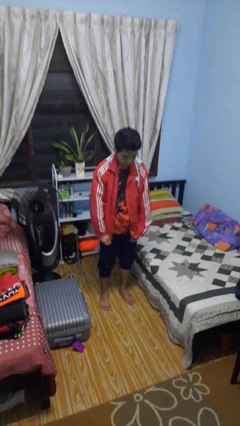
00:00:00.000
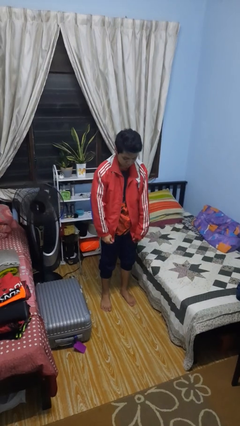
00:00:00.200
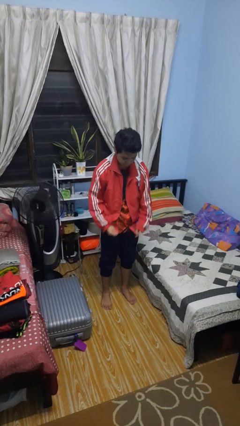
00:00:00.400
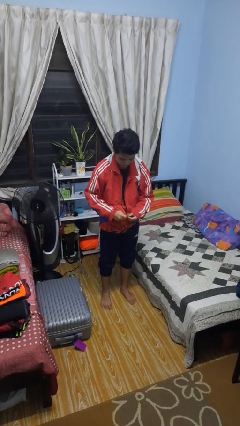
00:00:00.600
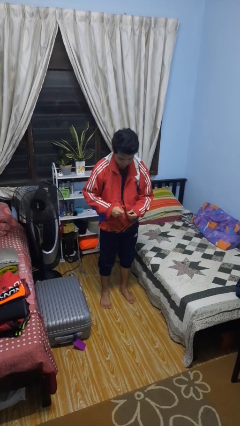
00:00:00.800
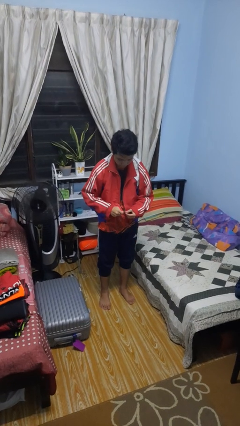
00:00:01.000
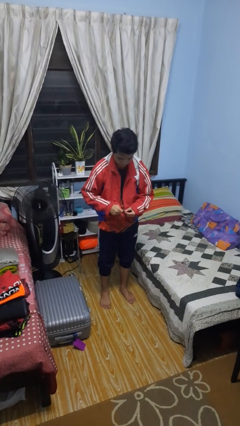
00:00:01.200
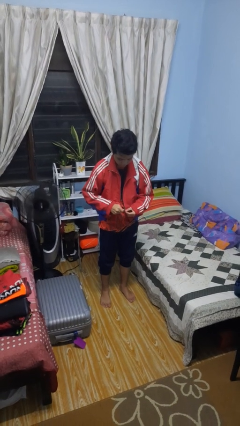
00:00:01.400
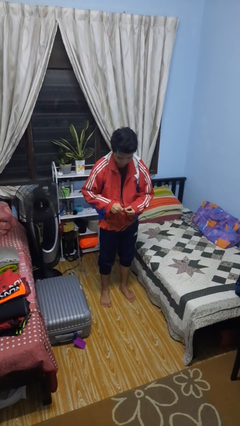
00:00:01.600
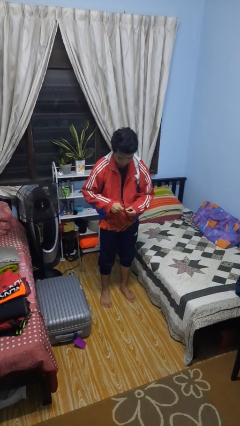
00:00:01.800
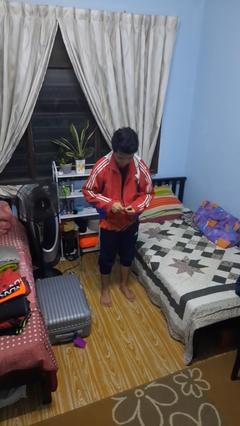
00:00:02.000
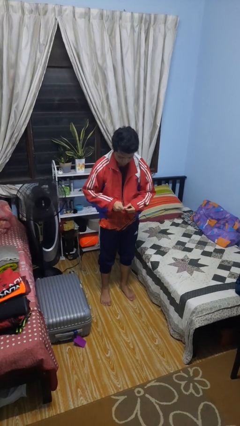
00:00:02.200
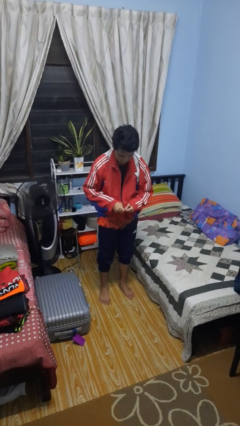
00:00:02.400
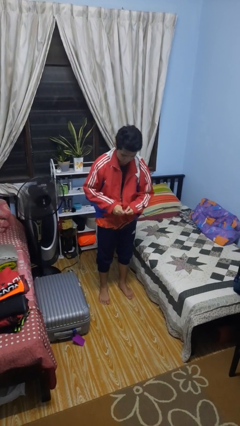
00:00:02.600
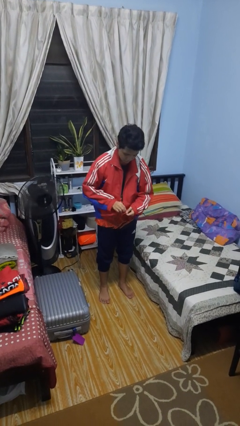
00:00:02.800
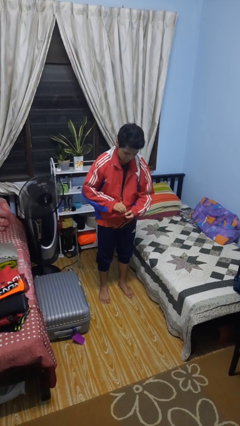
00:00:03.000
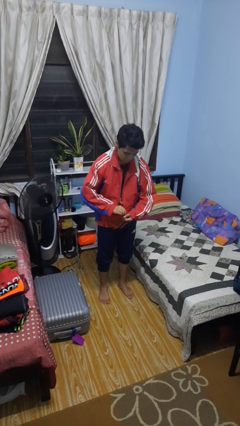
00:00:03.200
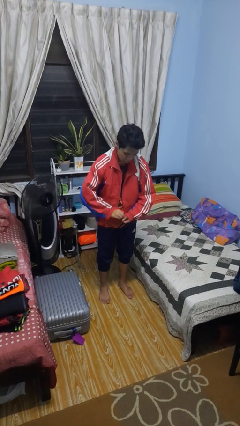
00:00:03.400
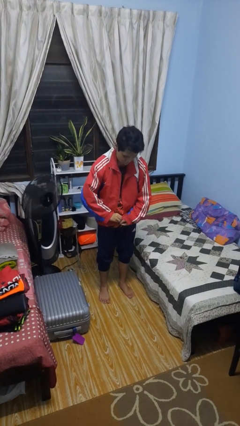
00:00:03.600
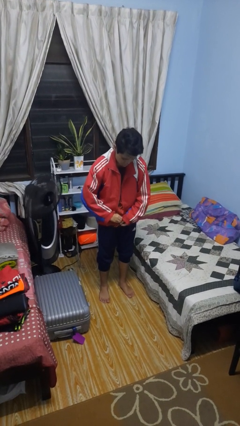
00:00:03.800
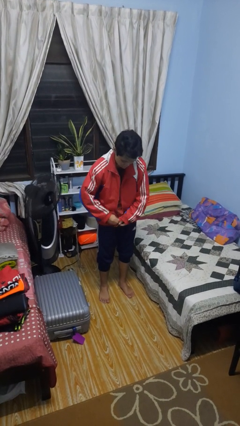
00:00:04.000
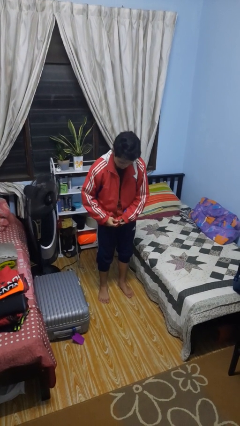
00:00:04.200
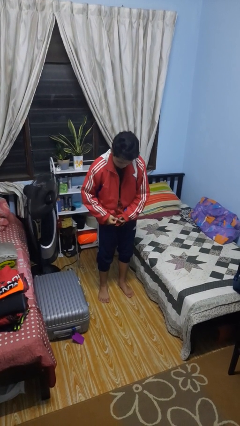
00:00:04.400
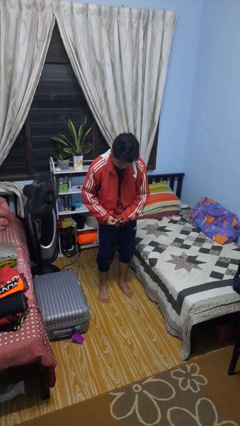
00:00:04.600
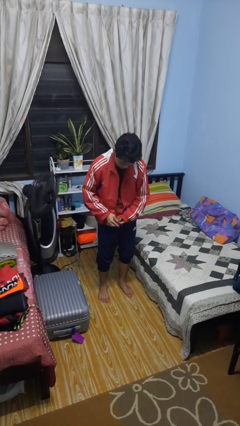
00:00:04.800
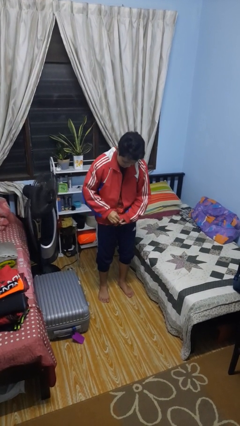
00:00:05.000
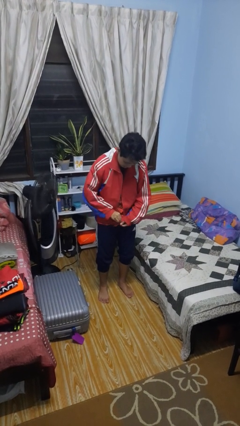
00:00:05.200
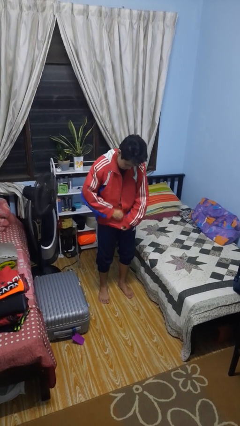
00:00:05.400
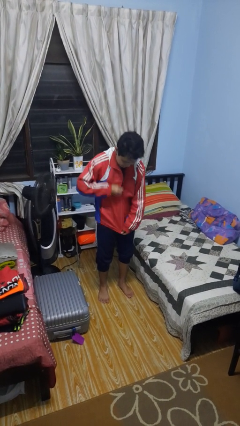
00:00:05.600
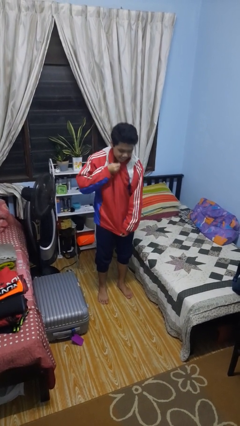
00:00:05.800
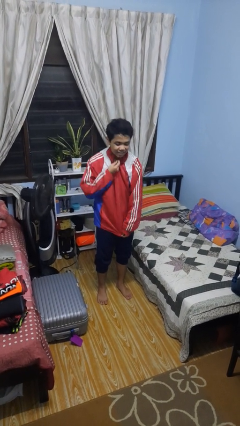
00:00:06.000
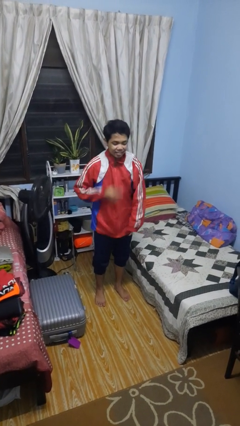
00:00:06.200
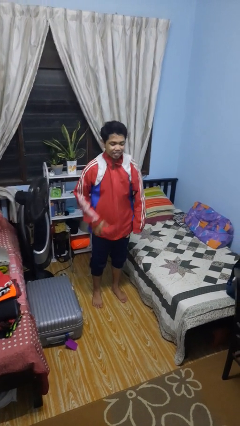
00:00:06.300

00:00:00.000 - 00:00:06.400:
person zips up jacket

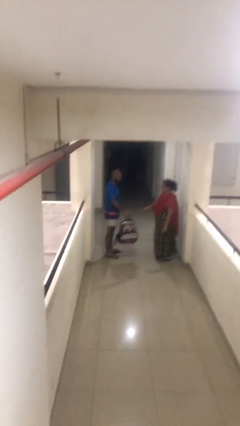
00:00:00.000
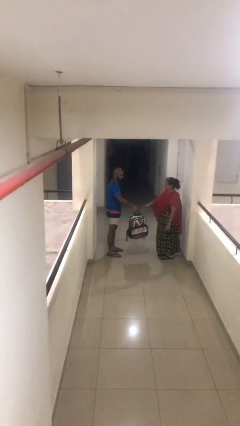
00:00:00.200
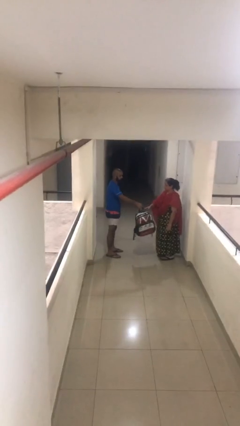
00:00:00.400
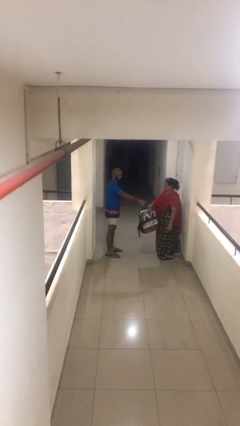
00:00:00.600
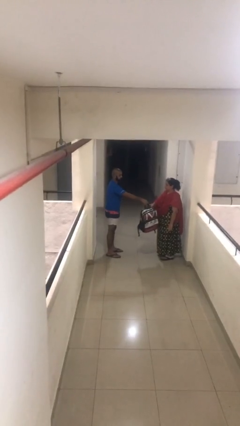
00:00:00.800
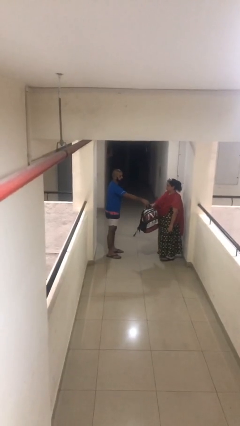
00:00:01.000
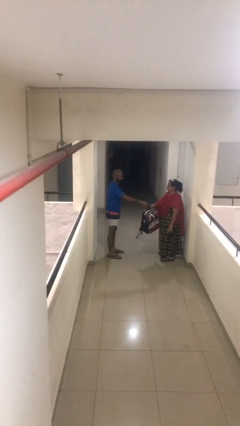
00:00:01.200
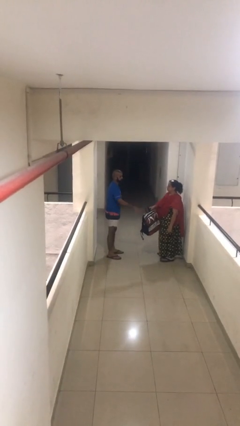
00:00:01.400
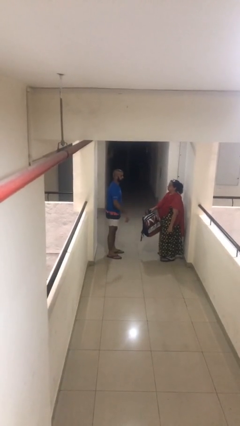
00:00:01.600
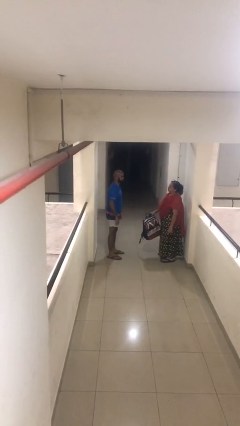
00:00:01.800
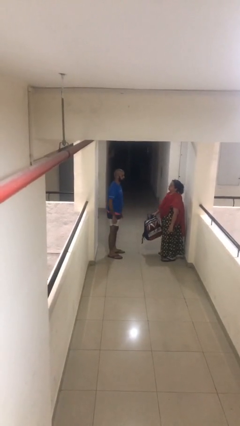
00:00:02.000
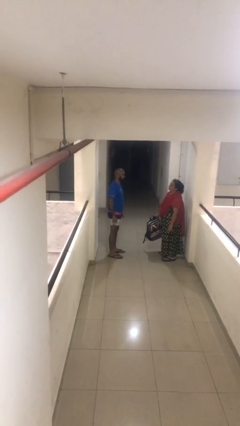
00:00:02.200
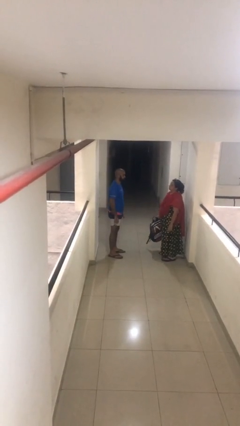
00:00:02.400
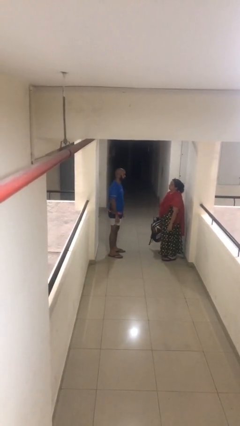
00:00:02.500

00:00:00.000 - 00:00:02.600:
person transfers object to person

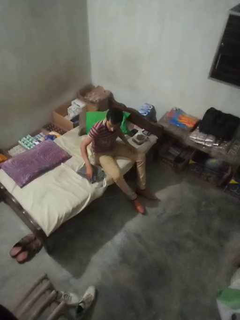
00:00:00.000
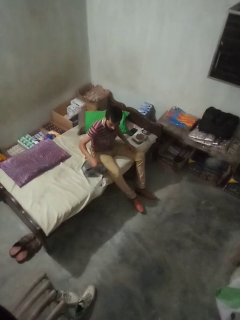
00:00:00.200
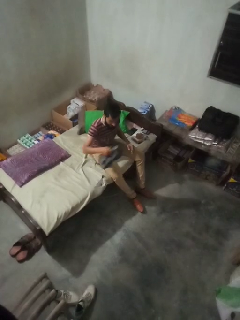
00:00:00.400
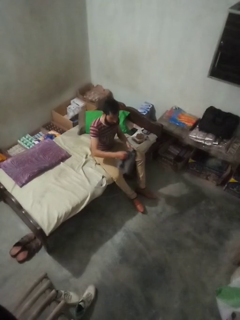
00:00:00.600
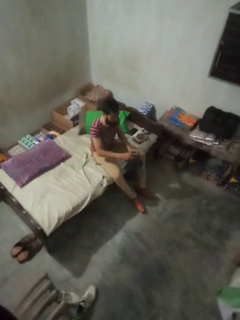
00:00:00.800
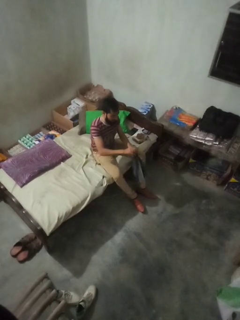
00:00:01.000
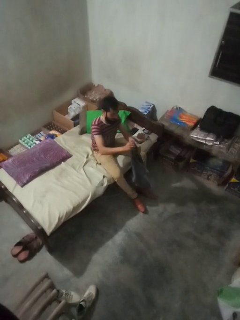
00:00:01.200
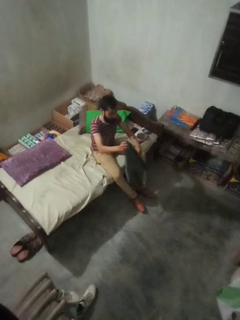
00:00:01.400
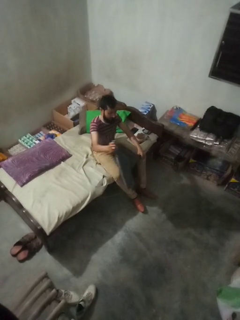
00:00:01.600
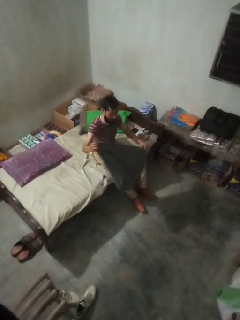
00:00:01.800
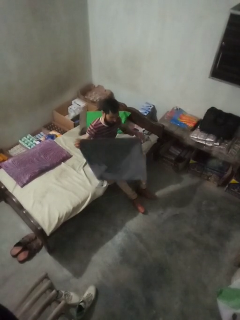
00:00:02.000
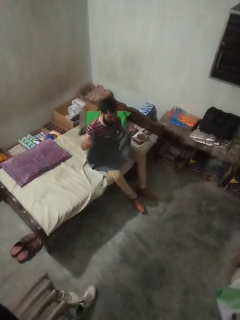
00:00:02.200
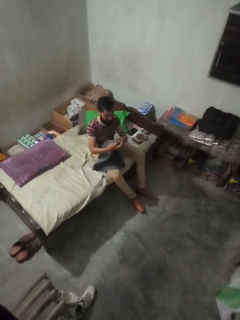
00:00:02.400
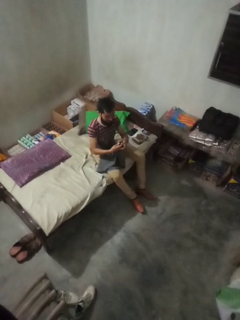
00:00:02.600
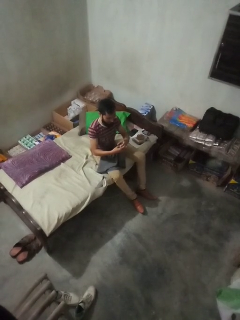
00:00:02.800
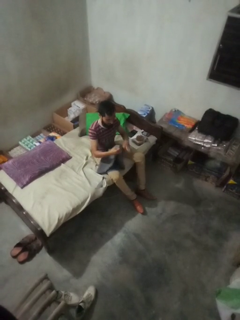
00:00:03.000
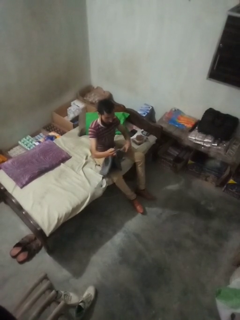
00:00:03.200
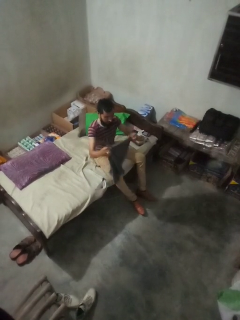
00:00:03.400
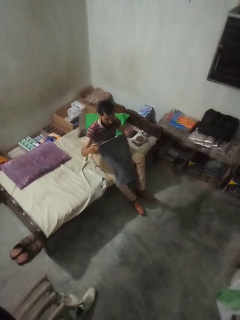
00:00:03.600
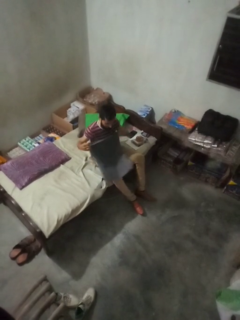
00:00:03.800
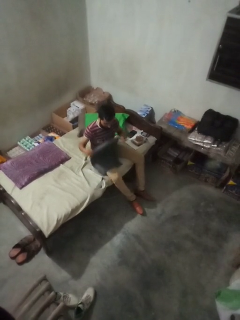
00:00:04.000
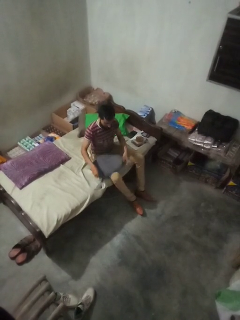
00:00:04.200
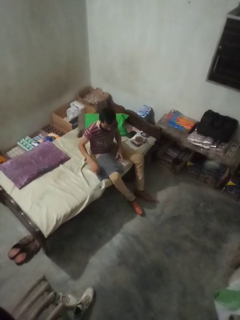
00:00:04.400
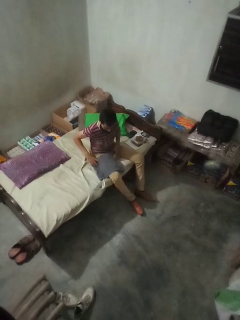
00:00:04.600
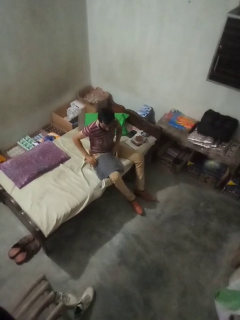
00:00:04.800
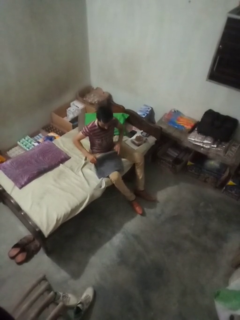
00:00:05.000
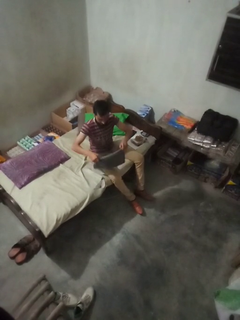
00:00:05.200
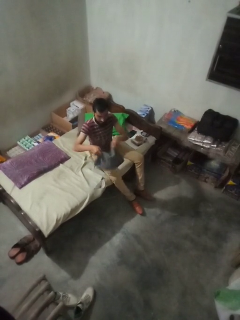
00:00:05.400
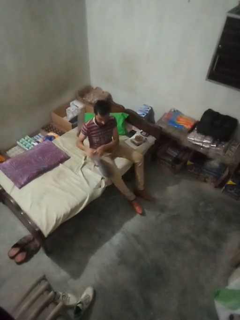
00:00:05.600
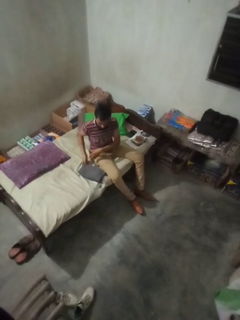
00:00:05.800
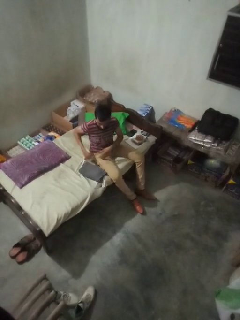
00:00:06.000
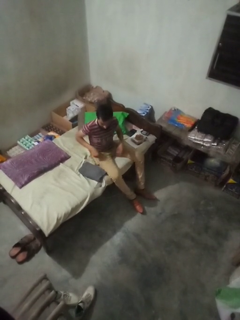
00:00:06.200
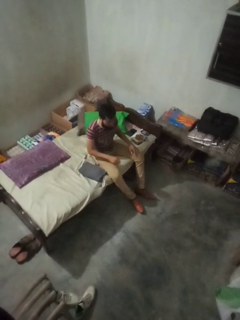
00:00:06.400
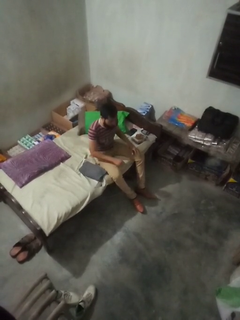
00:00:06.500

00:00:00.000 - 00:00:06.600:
person folds towel

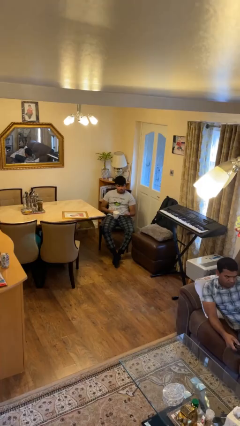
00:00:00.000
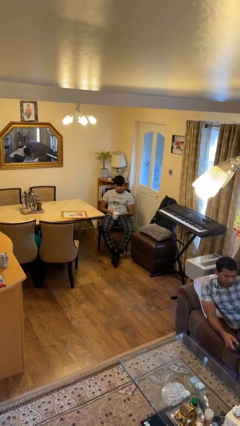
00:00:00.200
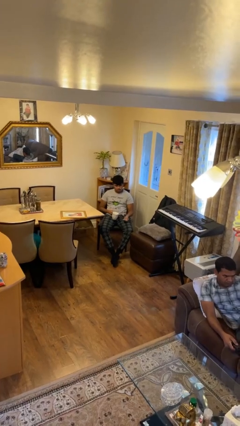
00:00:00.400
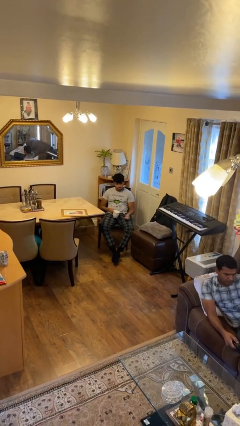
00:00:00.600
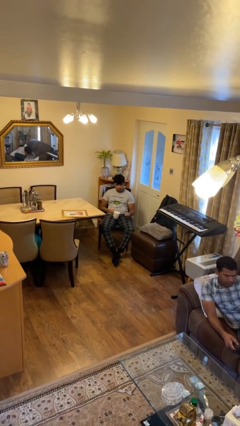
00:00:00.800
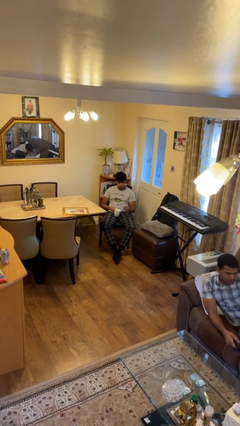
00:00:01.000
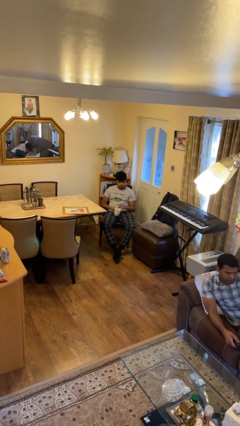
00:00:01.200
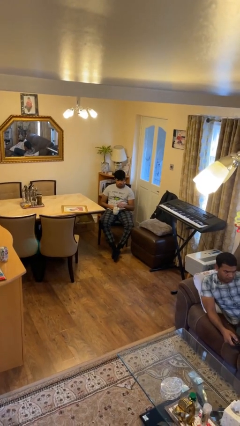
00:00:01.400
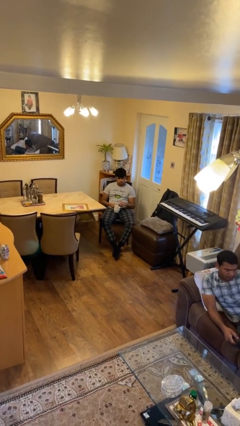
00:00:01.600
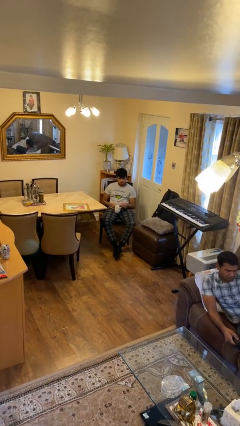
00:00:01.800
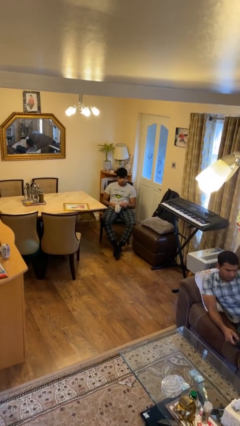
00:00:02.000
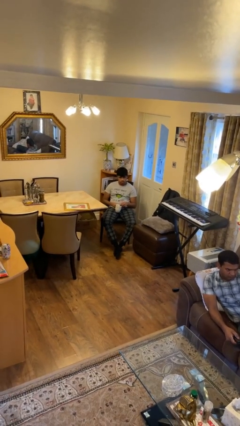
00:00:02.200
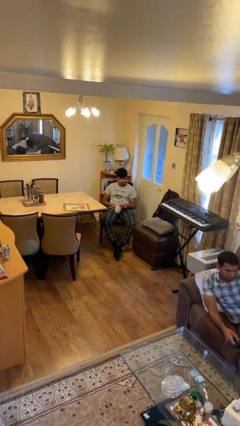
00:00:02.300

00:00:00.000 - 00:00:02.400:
person stirs mug

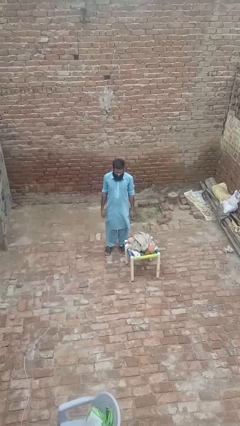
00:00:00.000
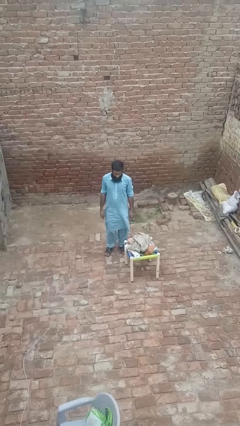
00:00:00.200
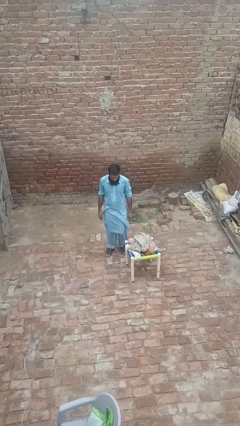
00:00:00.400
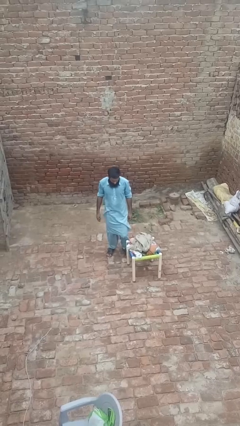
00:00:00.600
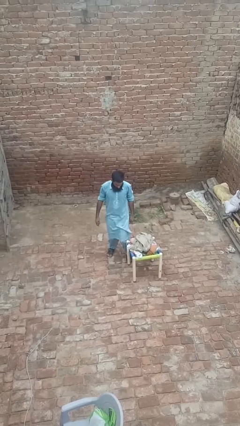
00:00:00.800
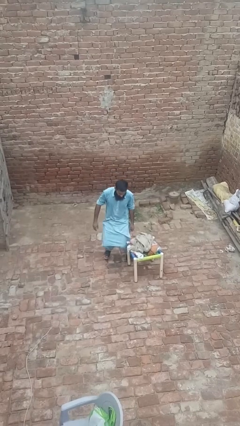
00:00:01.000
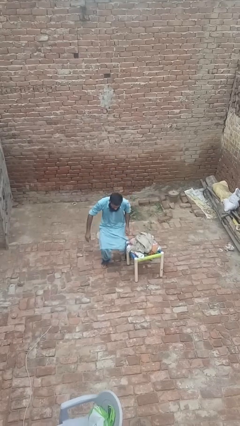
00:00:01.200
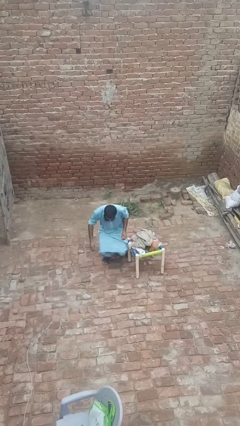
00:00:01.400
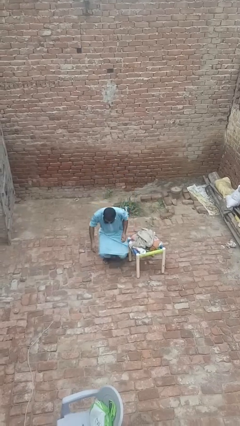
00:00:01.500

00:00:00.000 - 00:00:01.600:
person trips on object on floor
